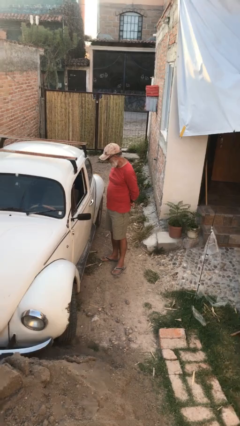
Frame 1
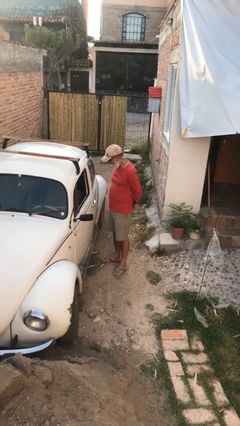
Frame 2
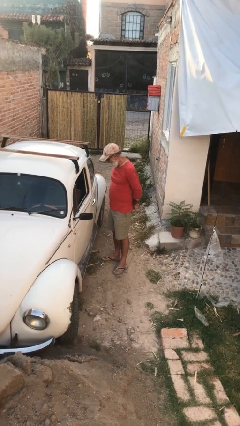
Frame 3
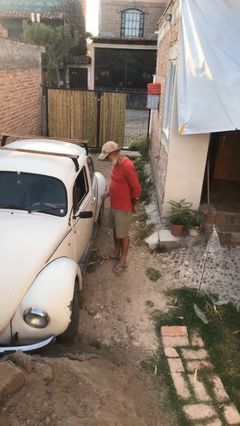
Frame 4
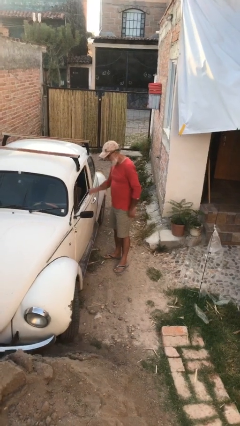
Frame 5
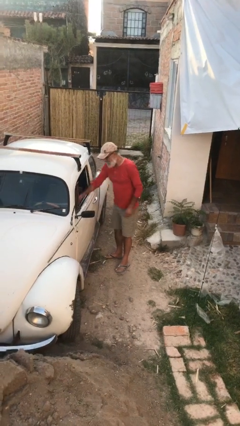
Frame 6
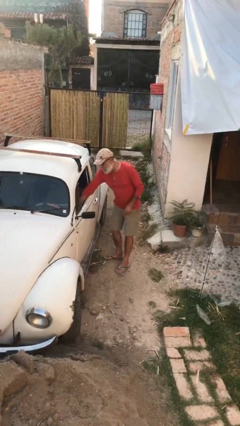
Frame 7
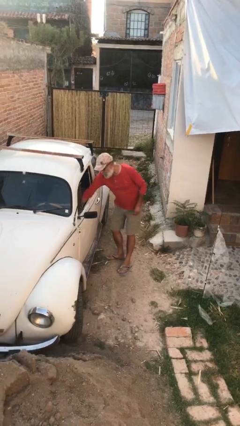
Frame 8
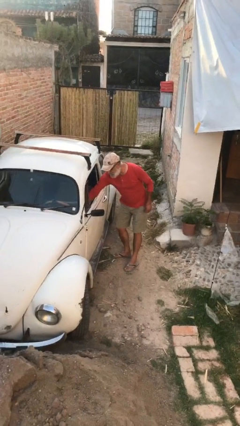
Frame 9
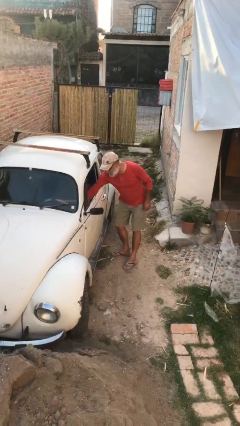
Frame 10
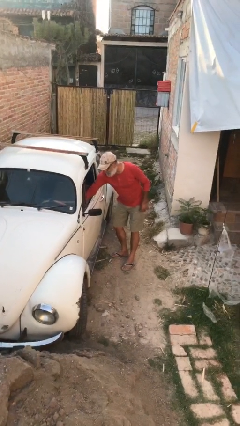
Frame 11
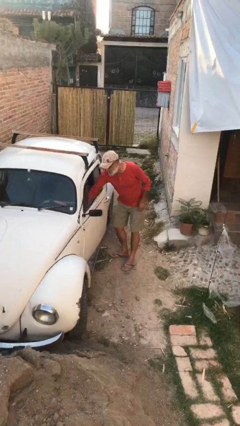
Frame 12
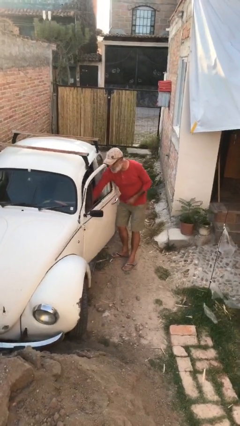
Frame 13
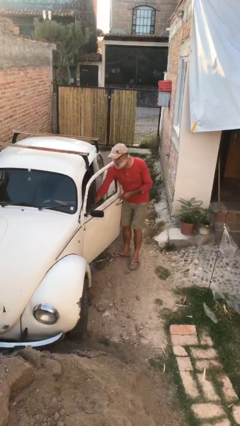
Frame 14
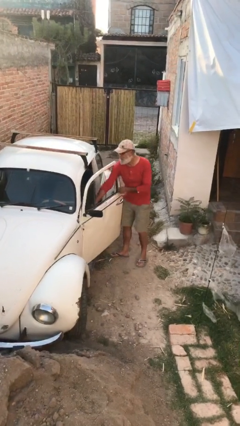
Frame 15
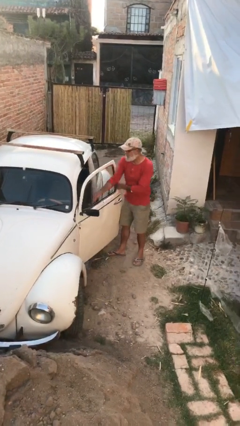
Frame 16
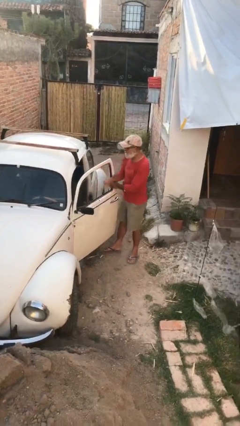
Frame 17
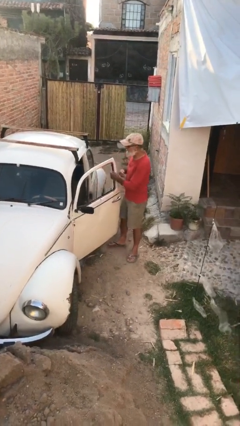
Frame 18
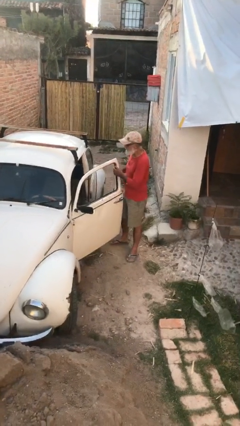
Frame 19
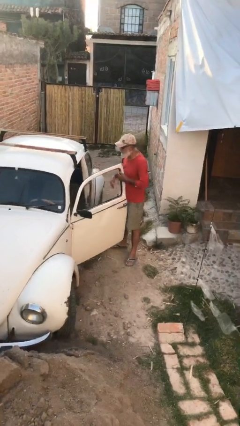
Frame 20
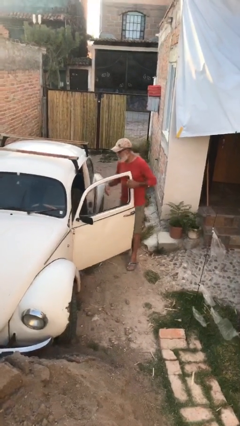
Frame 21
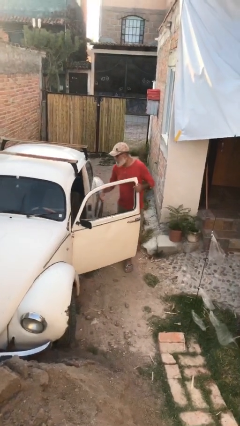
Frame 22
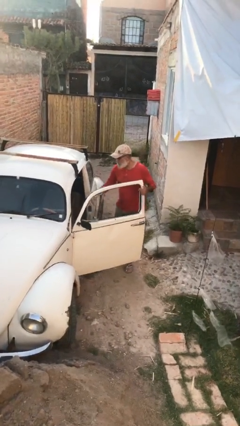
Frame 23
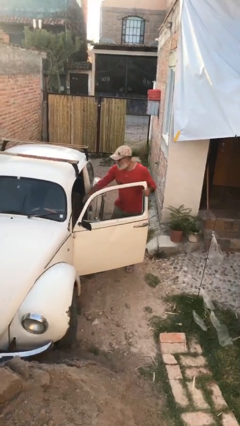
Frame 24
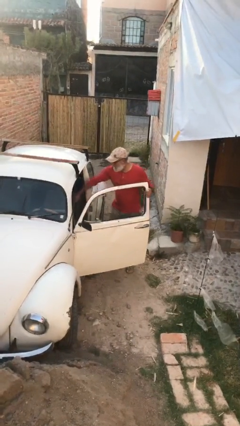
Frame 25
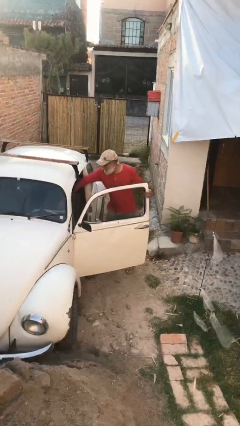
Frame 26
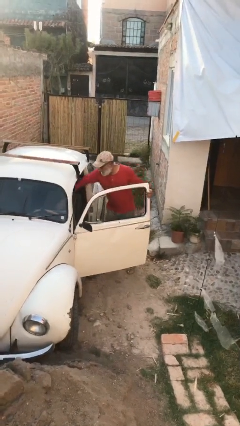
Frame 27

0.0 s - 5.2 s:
person opens car door

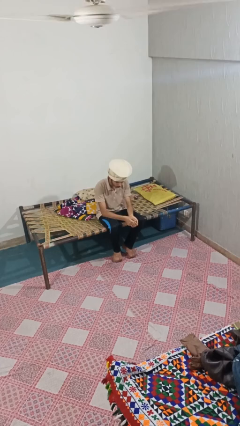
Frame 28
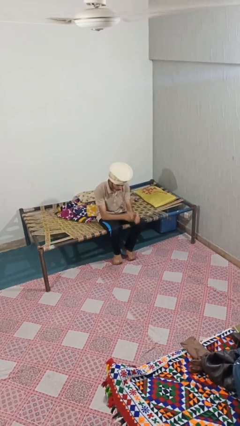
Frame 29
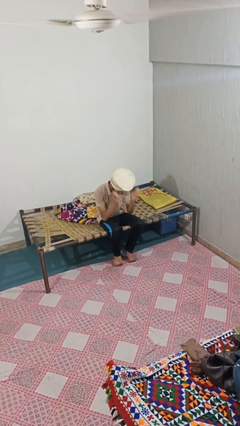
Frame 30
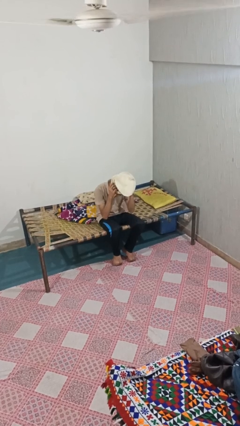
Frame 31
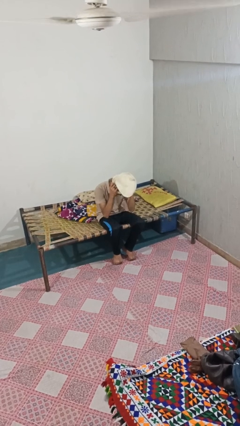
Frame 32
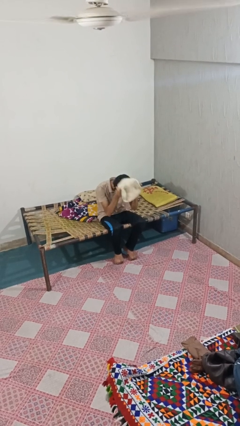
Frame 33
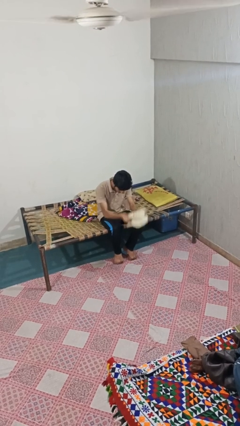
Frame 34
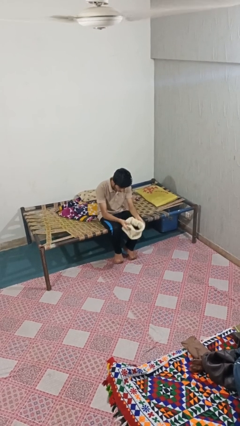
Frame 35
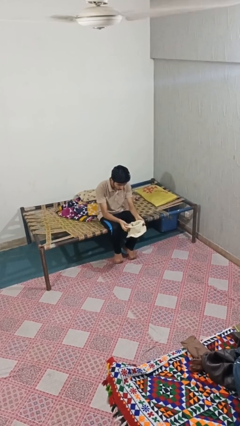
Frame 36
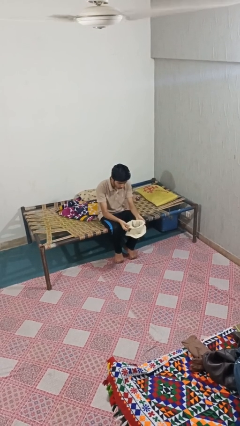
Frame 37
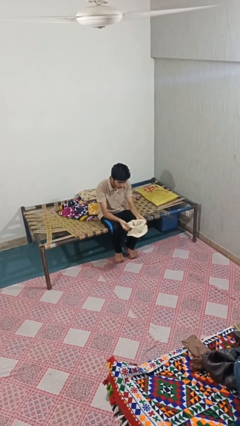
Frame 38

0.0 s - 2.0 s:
person takes off hat

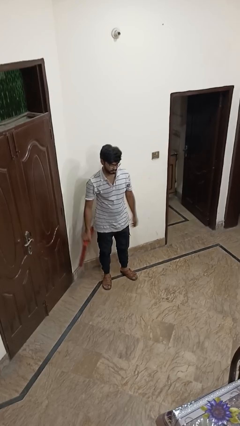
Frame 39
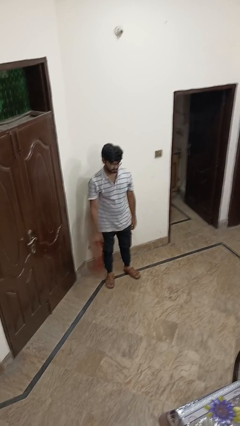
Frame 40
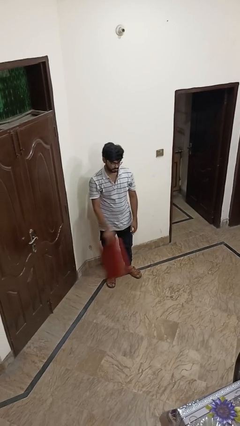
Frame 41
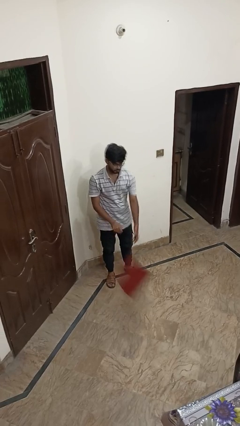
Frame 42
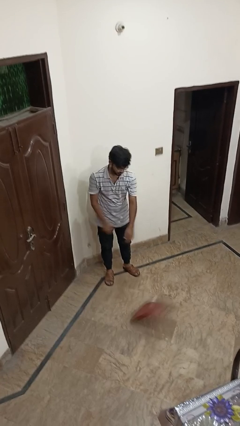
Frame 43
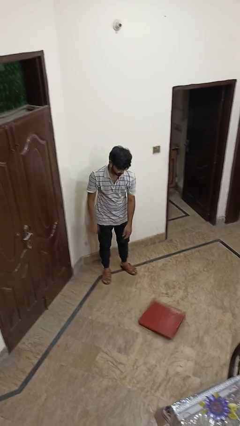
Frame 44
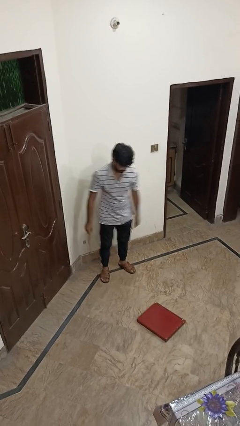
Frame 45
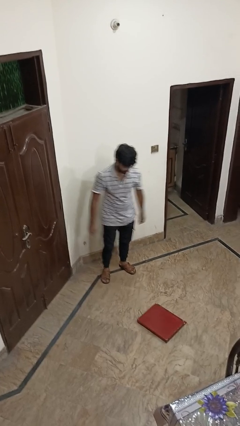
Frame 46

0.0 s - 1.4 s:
person drops object

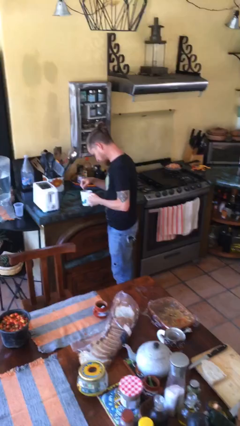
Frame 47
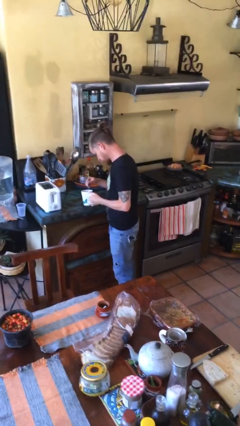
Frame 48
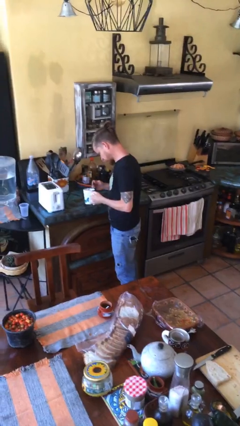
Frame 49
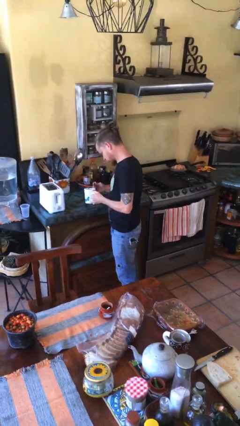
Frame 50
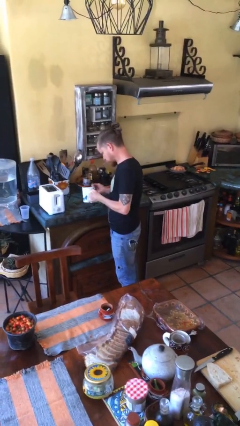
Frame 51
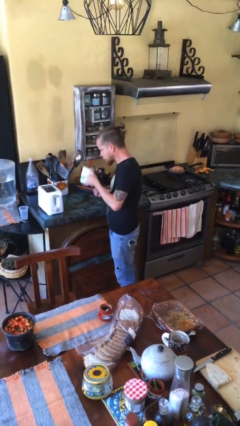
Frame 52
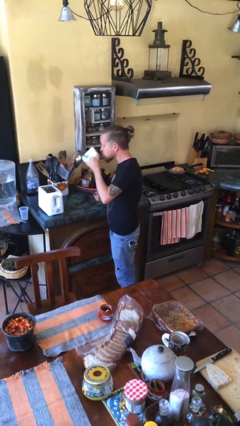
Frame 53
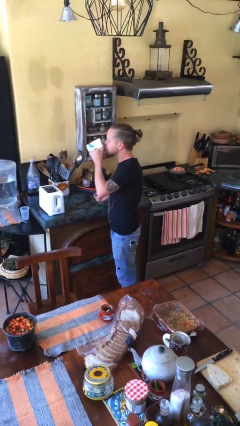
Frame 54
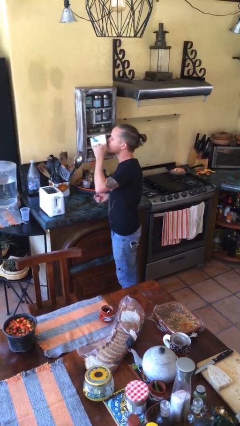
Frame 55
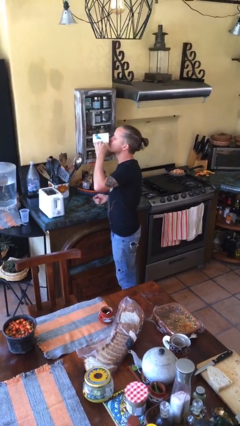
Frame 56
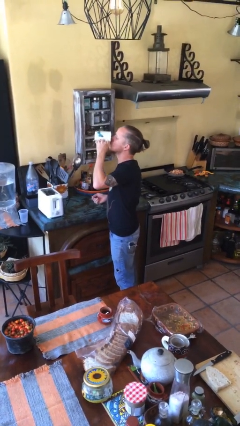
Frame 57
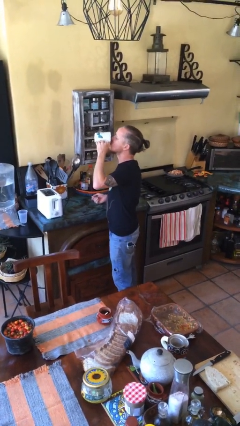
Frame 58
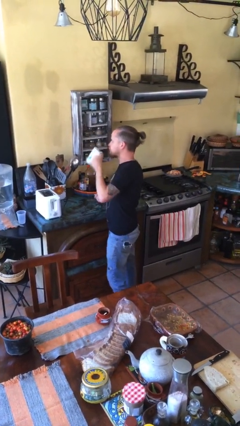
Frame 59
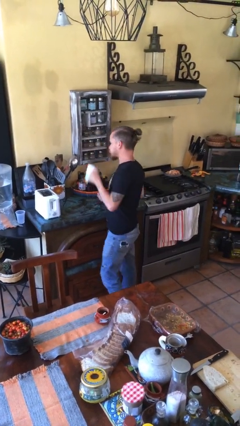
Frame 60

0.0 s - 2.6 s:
person drinks from mug

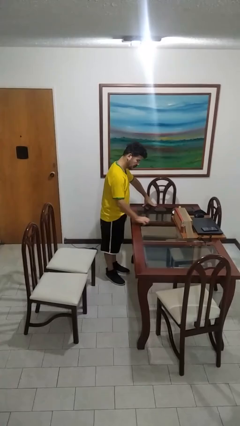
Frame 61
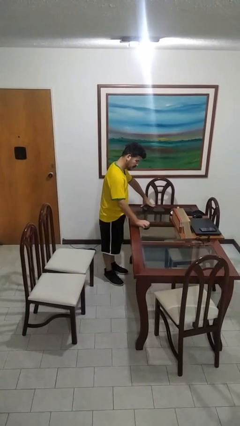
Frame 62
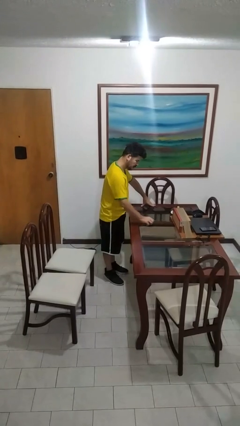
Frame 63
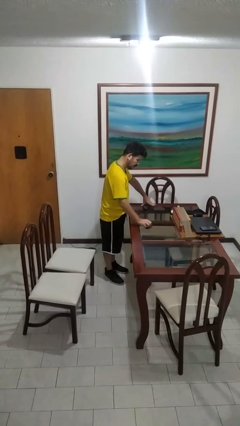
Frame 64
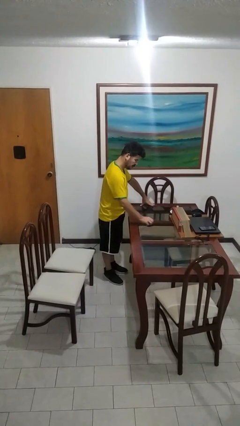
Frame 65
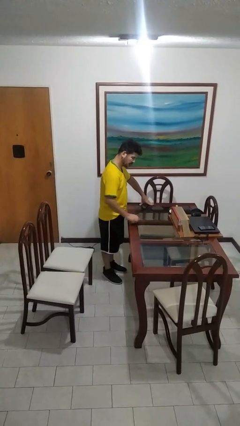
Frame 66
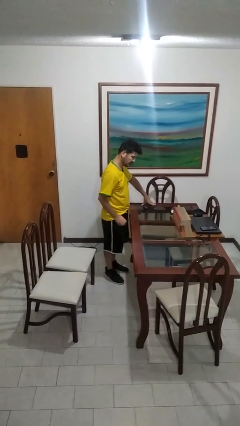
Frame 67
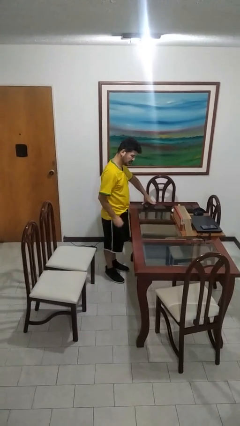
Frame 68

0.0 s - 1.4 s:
person cleans table with rag

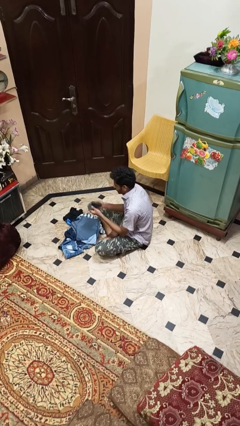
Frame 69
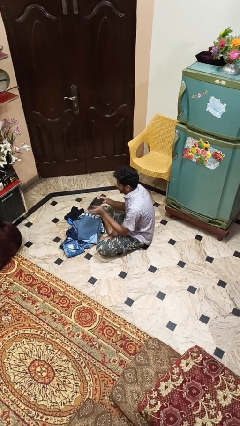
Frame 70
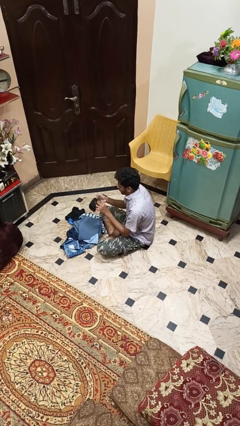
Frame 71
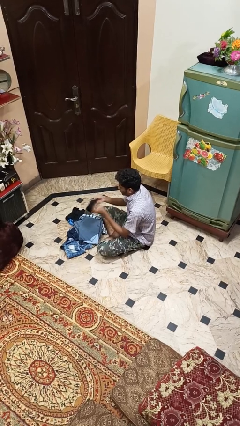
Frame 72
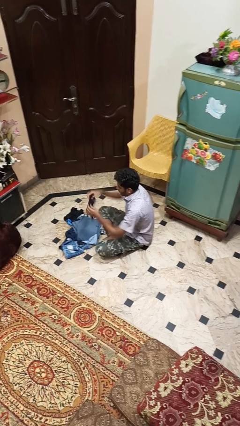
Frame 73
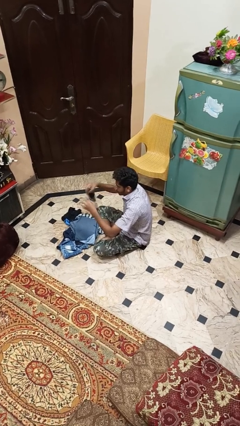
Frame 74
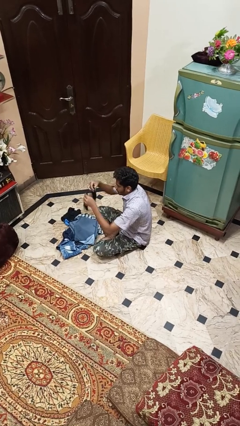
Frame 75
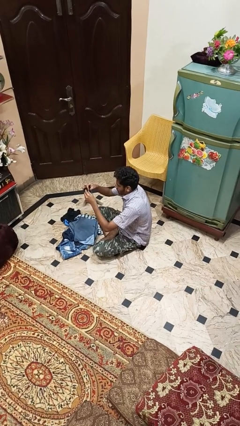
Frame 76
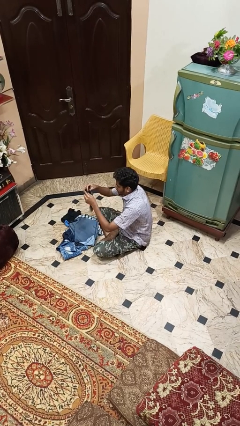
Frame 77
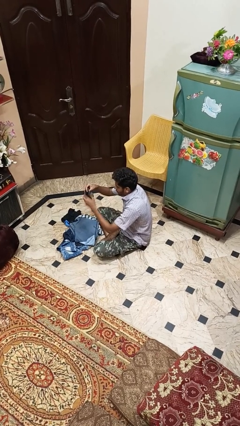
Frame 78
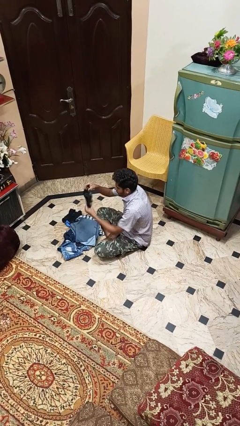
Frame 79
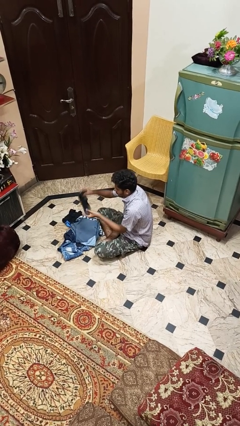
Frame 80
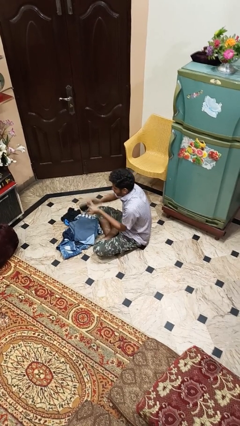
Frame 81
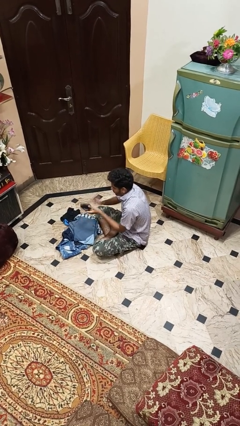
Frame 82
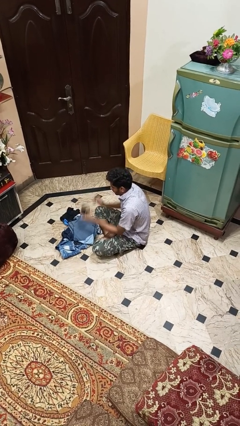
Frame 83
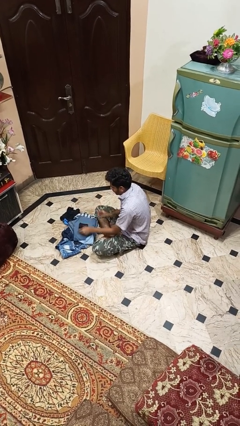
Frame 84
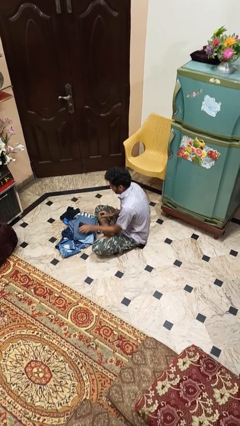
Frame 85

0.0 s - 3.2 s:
person folds socks

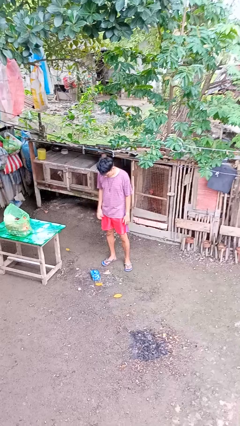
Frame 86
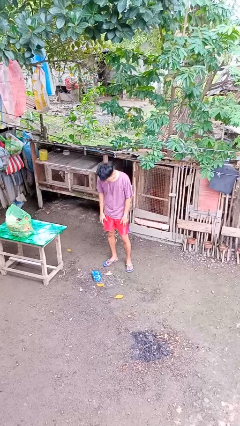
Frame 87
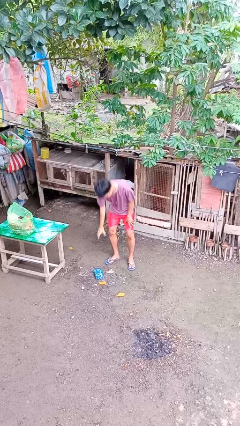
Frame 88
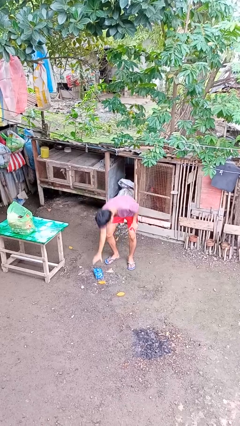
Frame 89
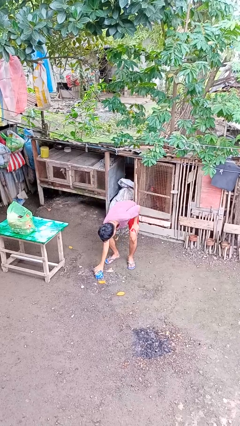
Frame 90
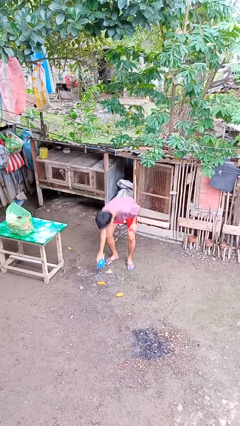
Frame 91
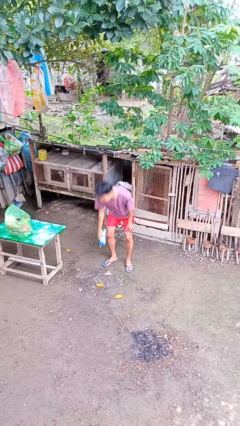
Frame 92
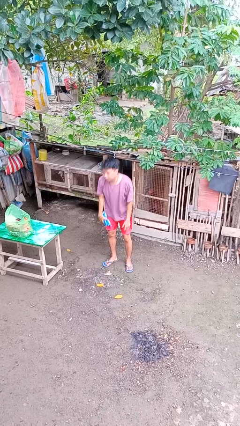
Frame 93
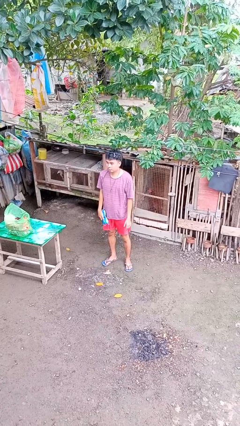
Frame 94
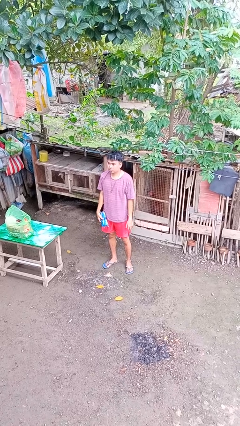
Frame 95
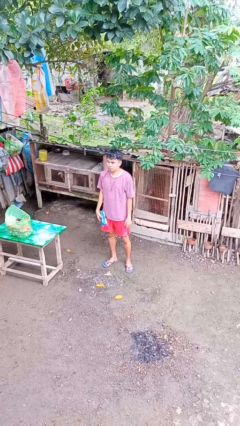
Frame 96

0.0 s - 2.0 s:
person picks up object from floor
